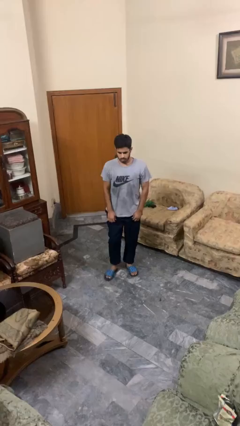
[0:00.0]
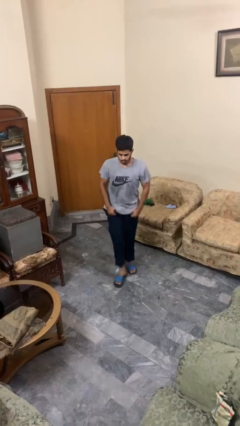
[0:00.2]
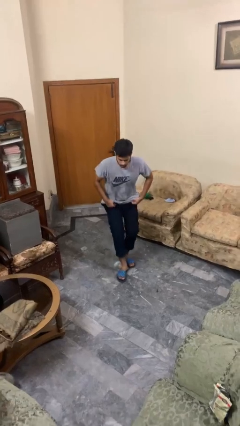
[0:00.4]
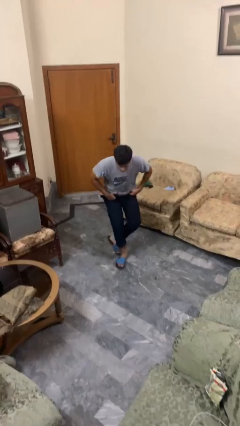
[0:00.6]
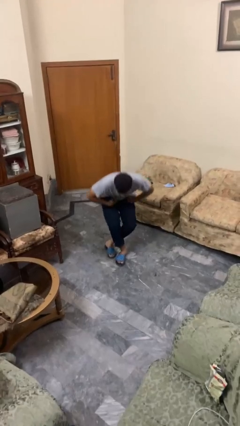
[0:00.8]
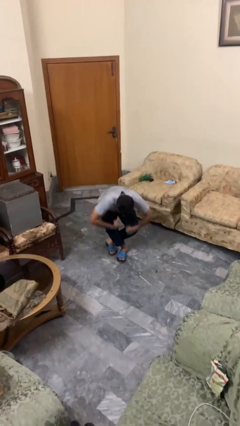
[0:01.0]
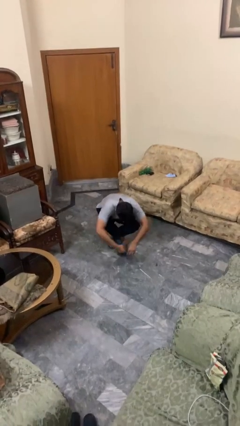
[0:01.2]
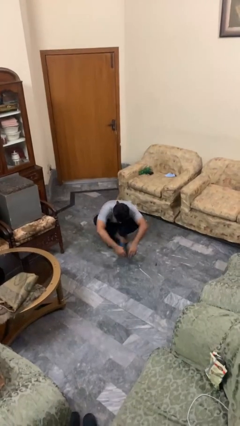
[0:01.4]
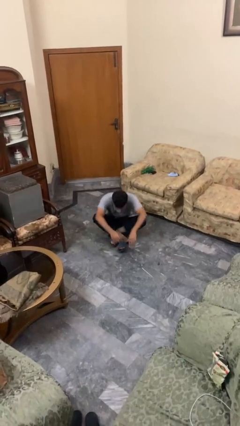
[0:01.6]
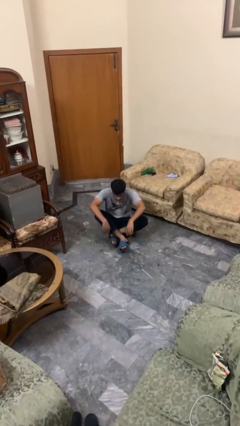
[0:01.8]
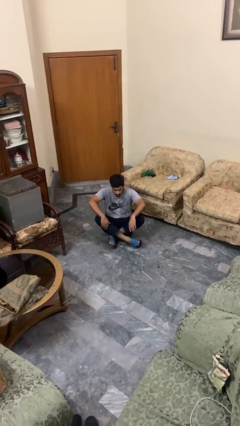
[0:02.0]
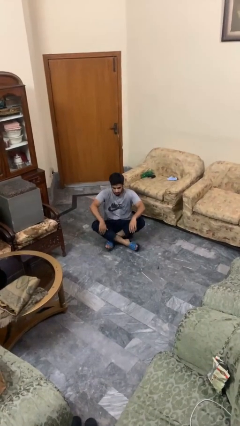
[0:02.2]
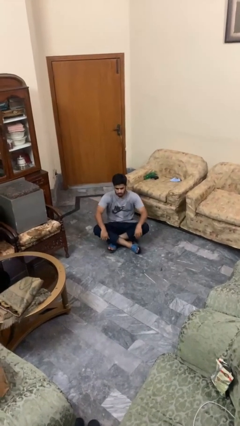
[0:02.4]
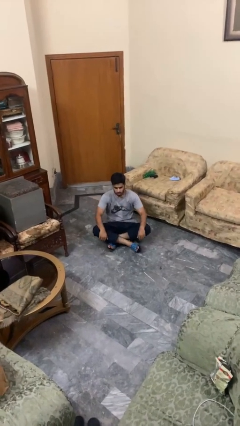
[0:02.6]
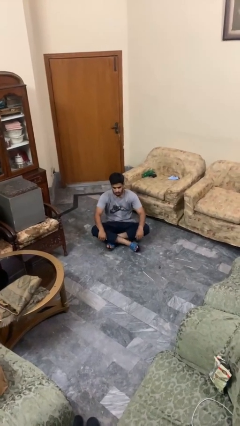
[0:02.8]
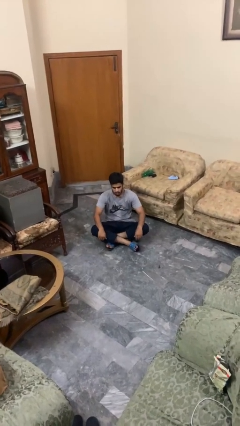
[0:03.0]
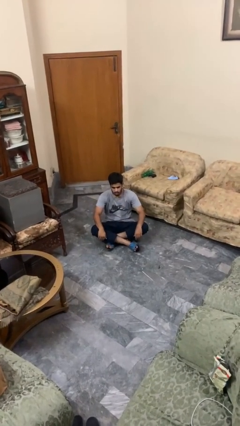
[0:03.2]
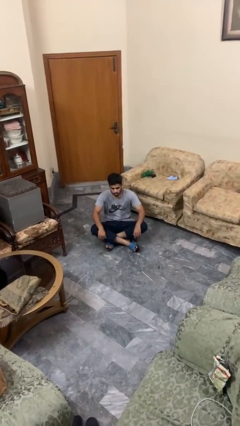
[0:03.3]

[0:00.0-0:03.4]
person sits crisscross

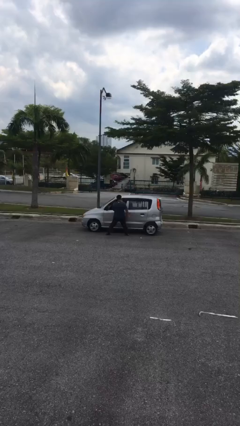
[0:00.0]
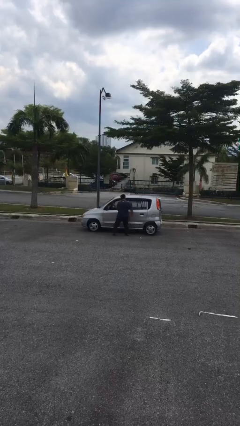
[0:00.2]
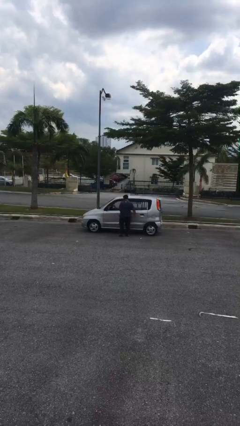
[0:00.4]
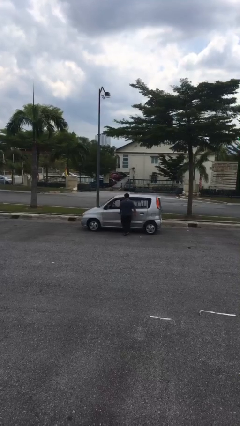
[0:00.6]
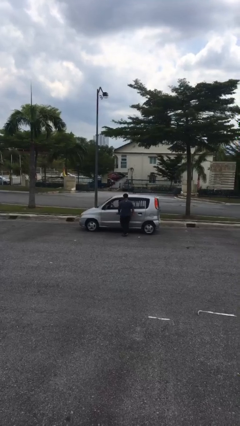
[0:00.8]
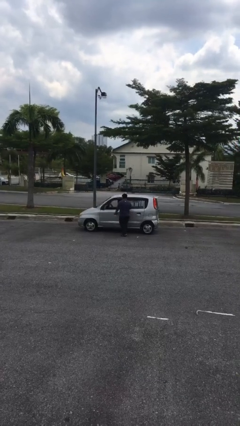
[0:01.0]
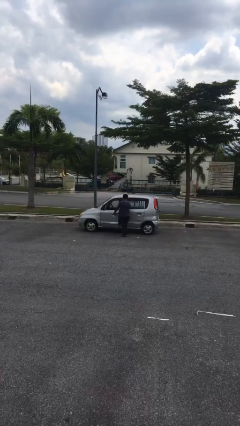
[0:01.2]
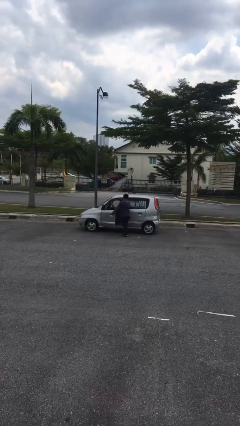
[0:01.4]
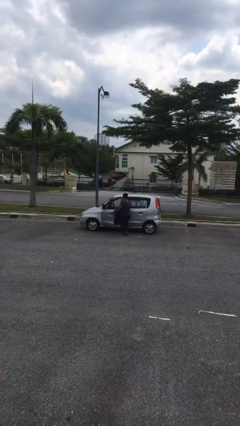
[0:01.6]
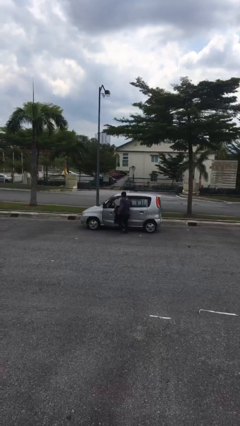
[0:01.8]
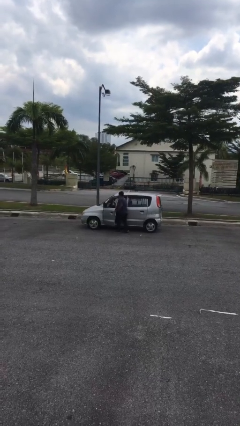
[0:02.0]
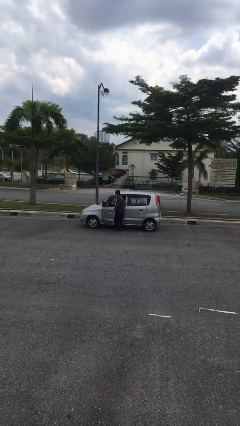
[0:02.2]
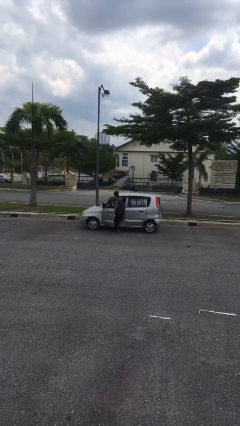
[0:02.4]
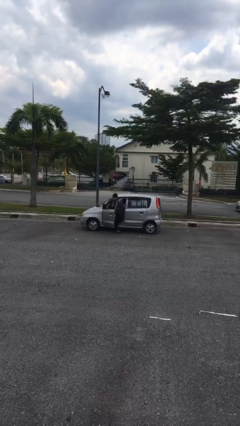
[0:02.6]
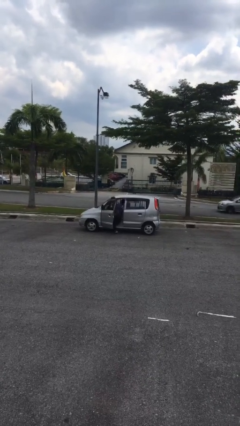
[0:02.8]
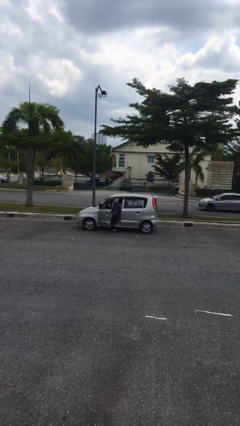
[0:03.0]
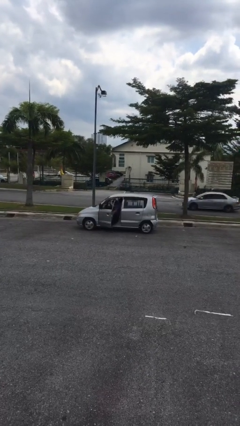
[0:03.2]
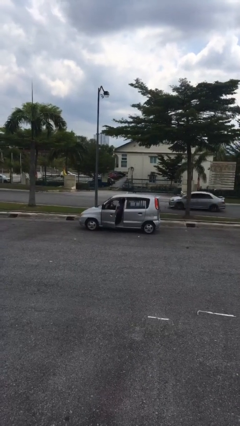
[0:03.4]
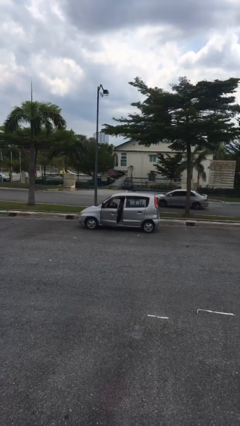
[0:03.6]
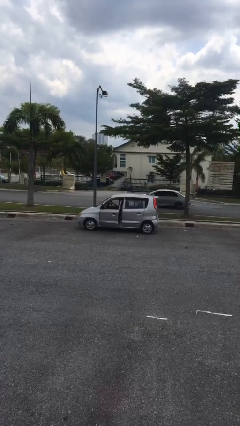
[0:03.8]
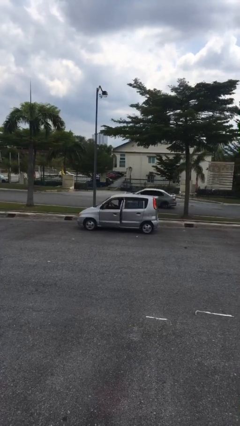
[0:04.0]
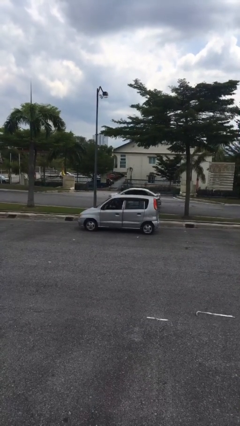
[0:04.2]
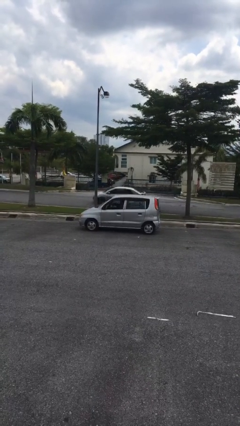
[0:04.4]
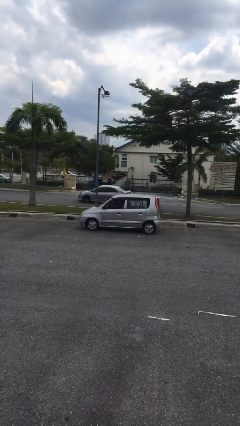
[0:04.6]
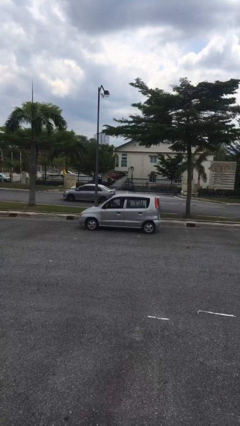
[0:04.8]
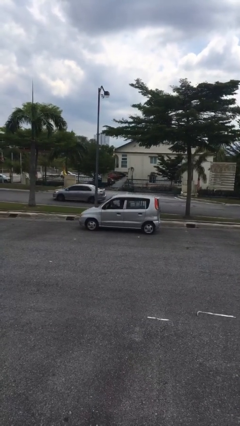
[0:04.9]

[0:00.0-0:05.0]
car picks up person

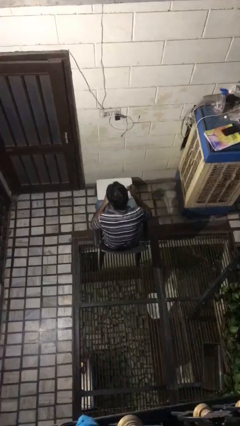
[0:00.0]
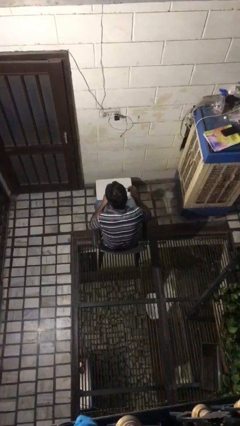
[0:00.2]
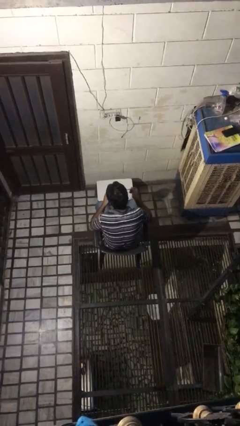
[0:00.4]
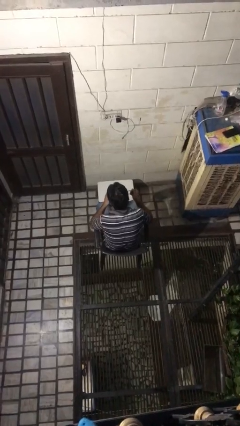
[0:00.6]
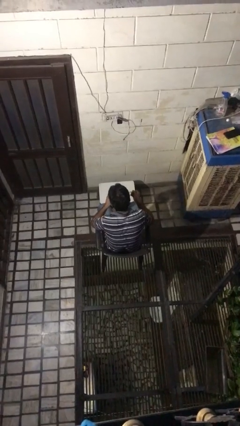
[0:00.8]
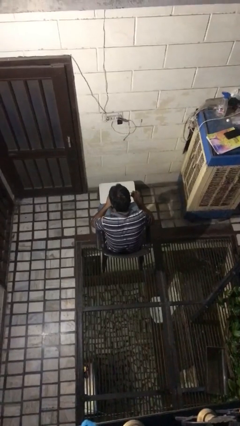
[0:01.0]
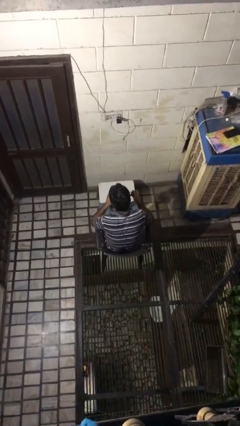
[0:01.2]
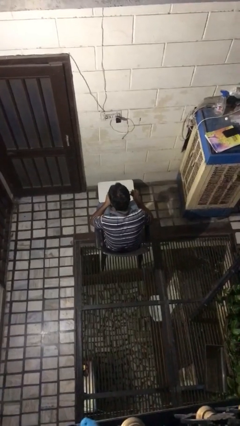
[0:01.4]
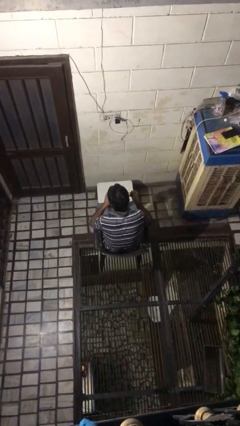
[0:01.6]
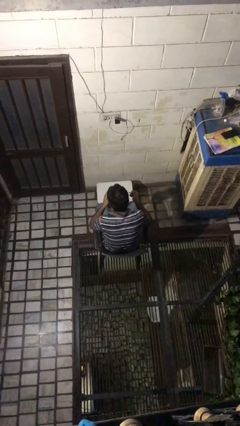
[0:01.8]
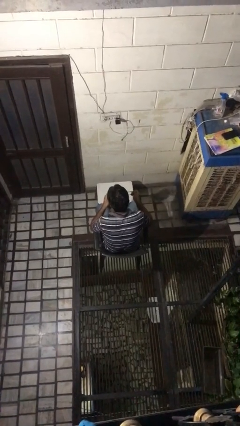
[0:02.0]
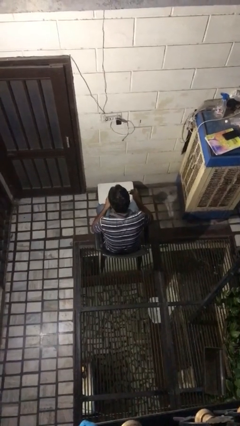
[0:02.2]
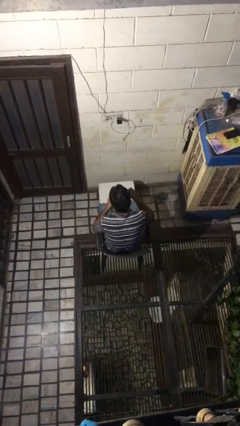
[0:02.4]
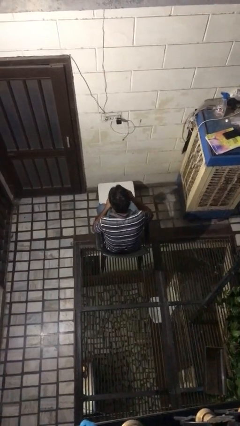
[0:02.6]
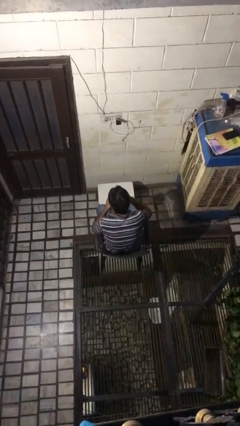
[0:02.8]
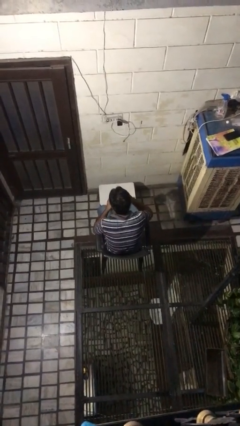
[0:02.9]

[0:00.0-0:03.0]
person drinks from mug

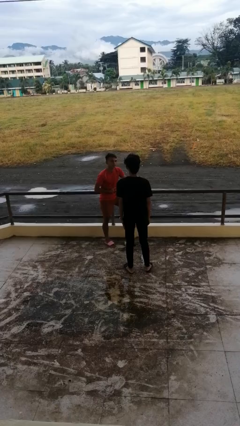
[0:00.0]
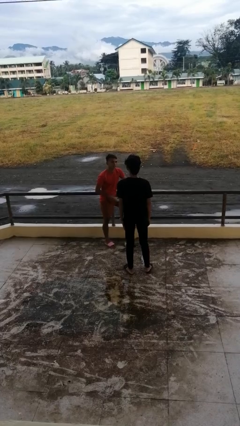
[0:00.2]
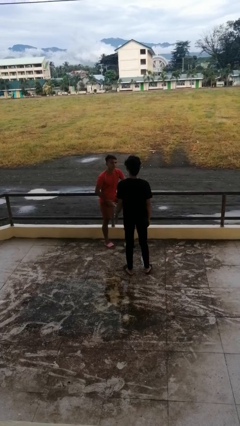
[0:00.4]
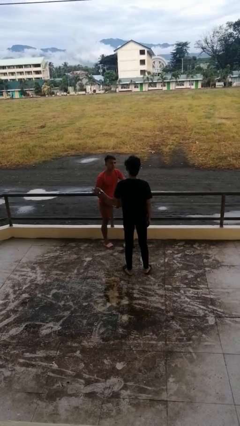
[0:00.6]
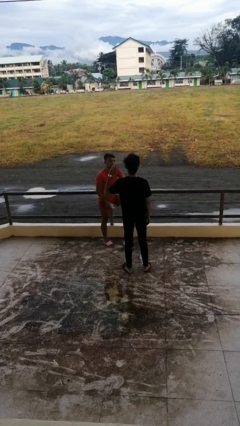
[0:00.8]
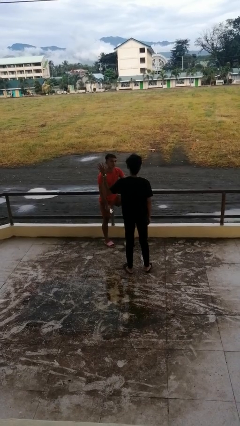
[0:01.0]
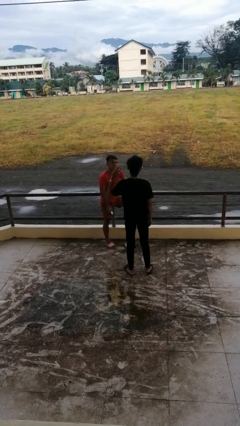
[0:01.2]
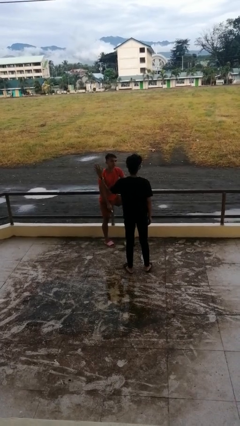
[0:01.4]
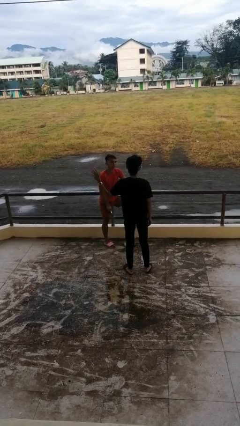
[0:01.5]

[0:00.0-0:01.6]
person waves at person

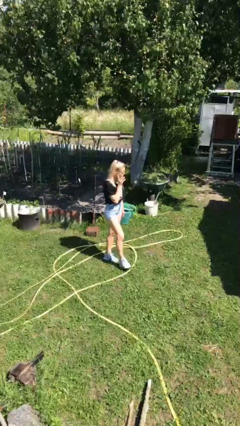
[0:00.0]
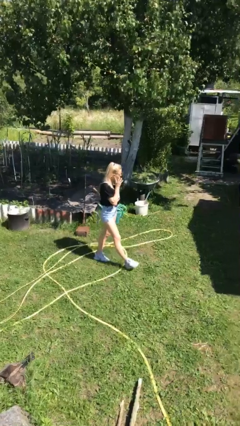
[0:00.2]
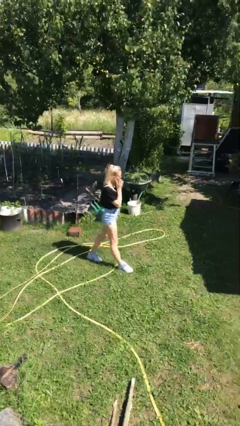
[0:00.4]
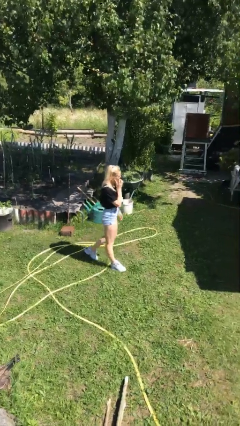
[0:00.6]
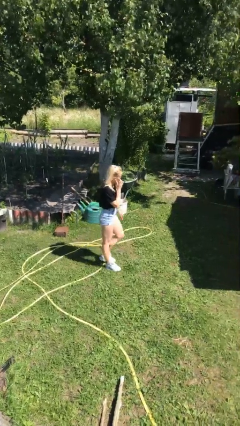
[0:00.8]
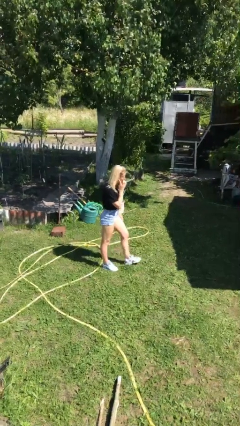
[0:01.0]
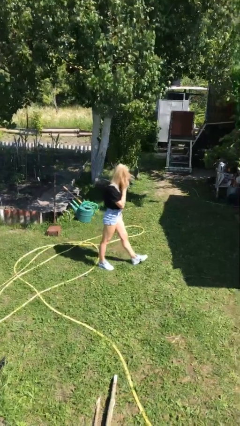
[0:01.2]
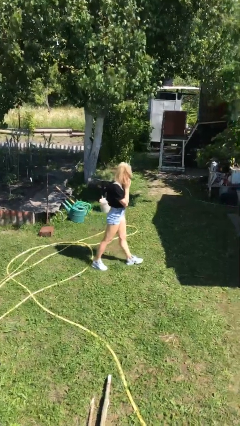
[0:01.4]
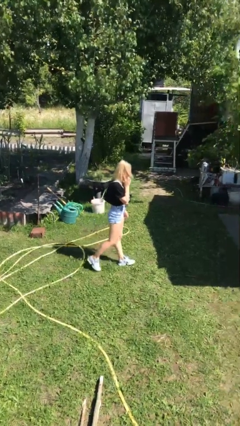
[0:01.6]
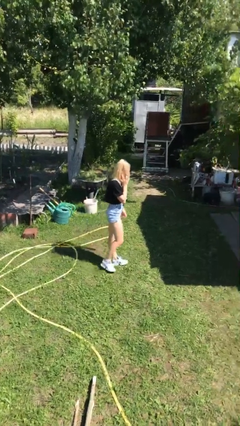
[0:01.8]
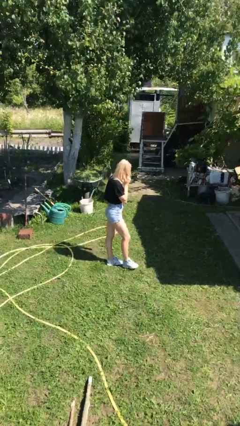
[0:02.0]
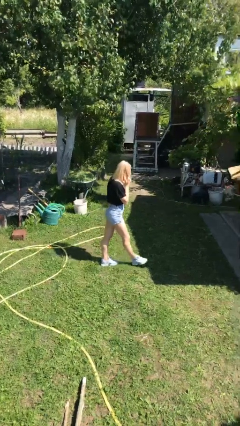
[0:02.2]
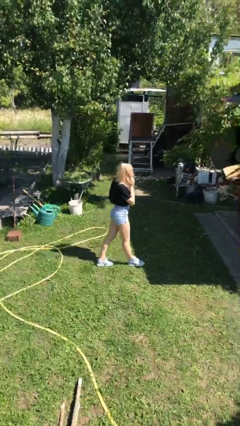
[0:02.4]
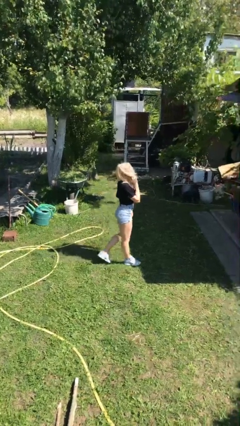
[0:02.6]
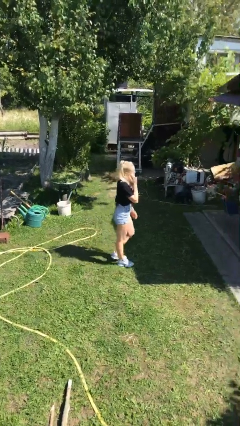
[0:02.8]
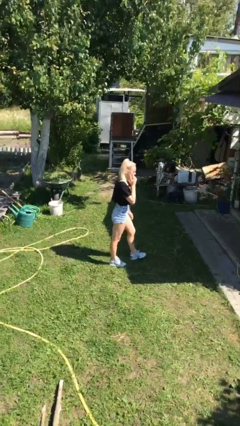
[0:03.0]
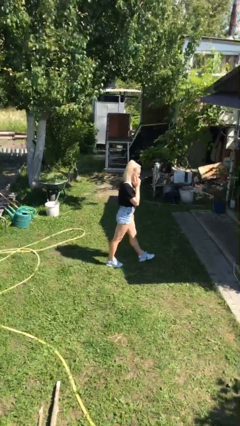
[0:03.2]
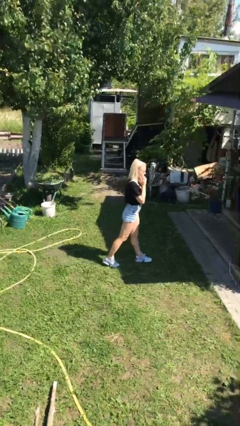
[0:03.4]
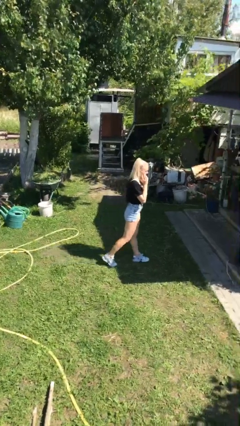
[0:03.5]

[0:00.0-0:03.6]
person talks on phone

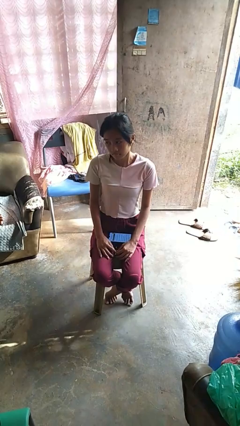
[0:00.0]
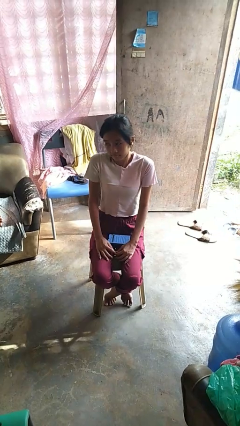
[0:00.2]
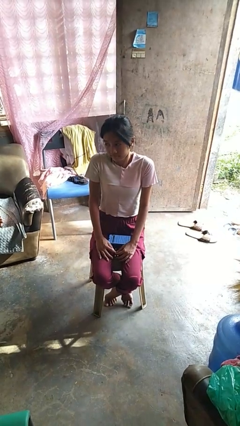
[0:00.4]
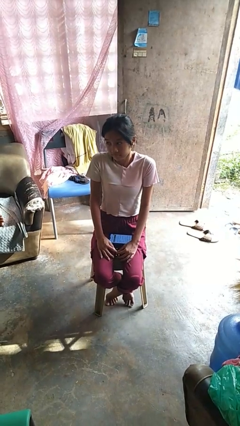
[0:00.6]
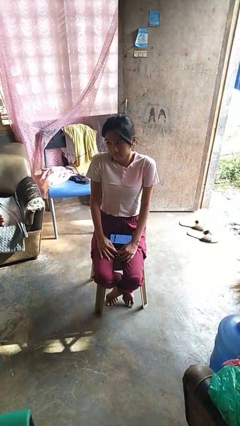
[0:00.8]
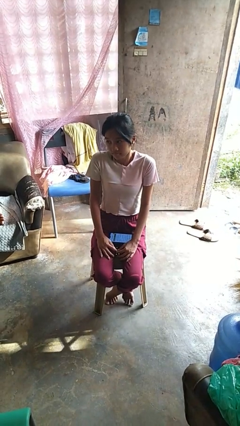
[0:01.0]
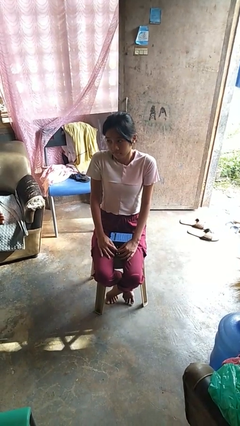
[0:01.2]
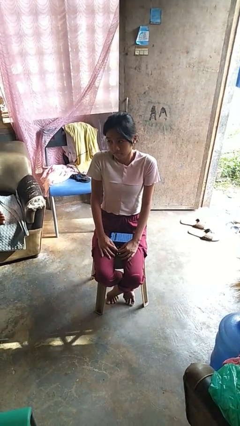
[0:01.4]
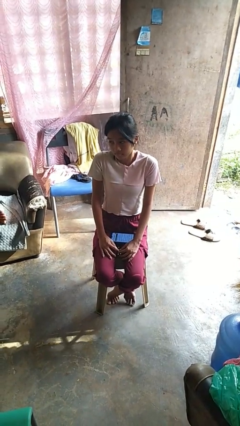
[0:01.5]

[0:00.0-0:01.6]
person shrugs
